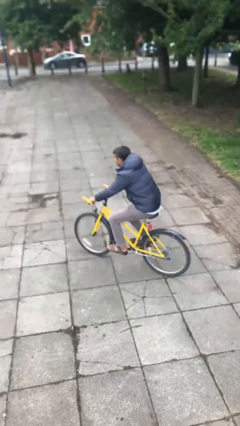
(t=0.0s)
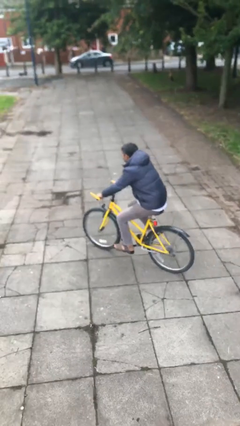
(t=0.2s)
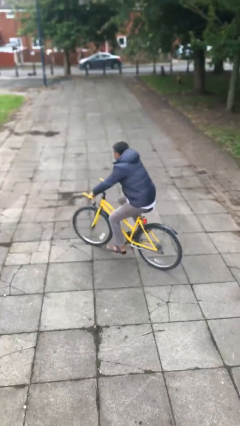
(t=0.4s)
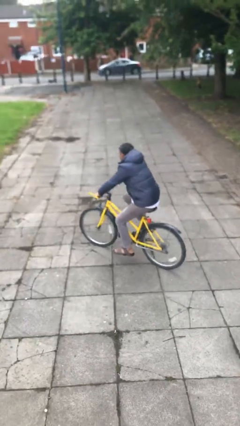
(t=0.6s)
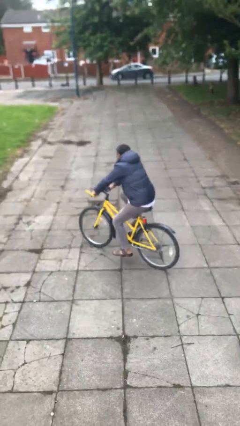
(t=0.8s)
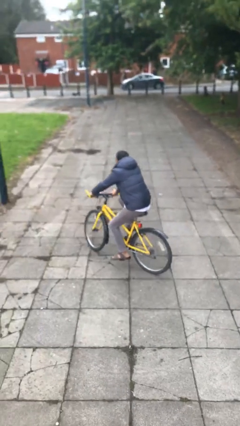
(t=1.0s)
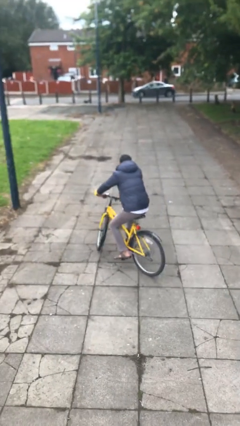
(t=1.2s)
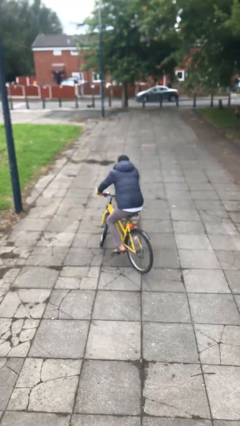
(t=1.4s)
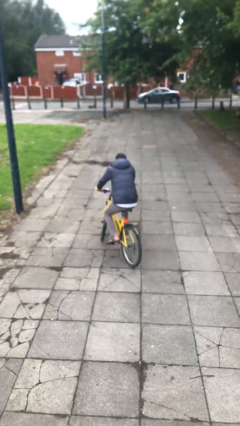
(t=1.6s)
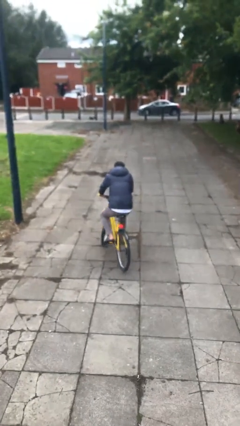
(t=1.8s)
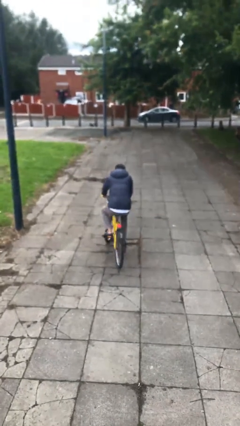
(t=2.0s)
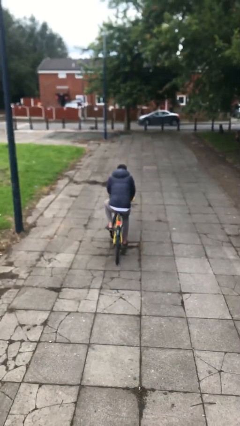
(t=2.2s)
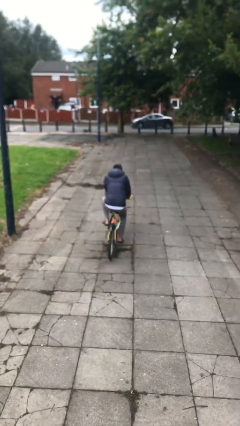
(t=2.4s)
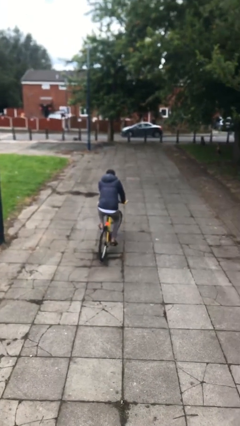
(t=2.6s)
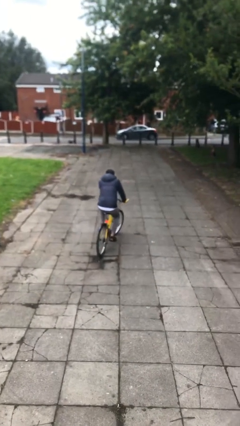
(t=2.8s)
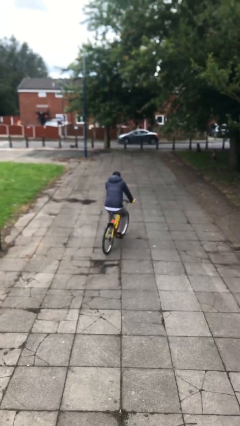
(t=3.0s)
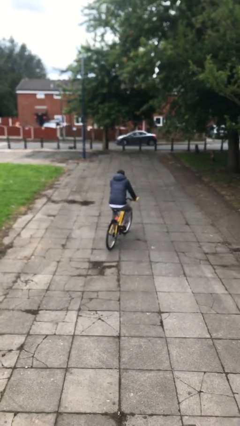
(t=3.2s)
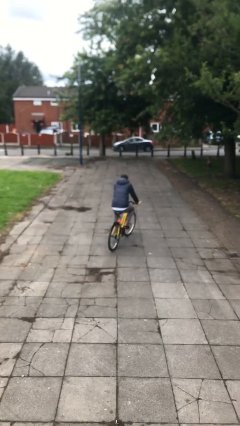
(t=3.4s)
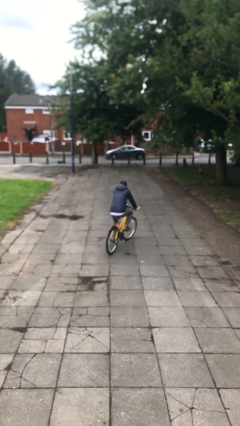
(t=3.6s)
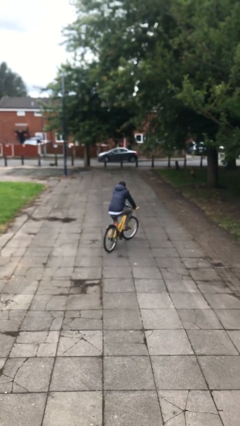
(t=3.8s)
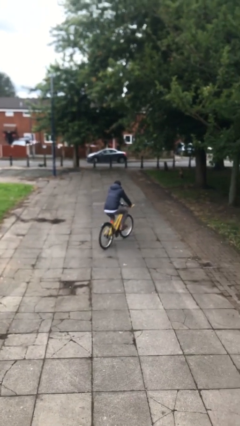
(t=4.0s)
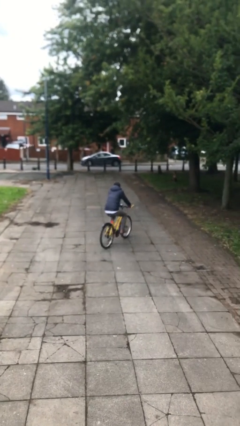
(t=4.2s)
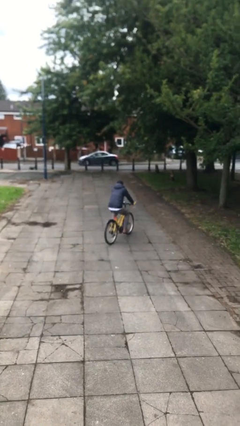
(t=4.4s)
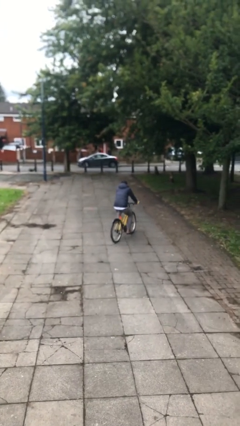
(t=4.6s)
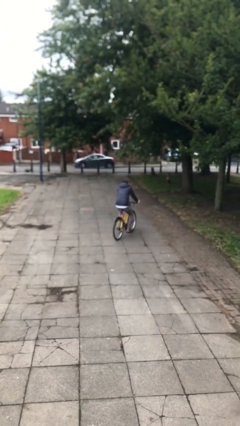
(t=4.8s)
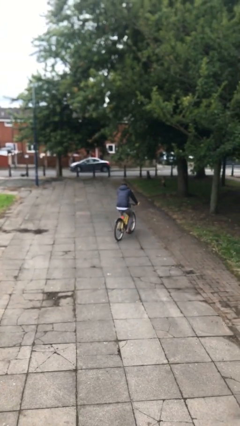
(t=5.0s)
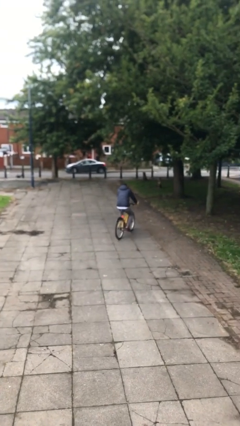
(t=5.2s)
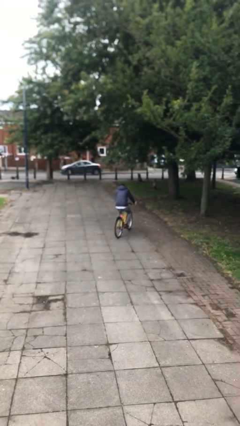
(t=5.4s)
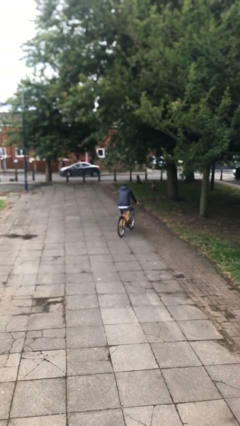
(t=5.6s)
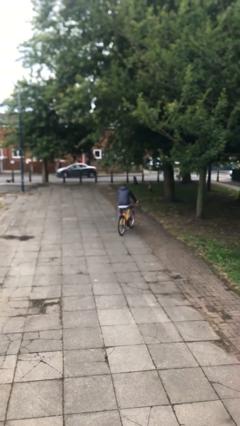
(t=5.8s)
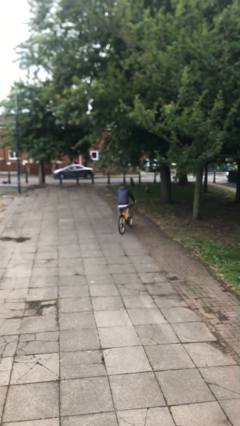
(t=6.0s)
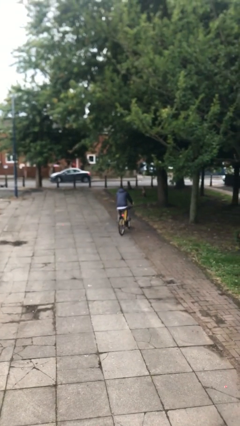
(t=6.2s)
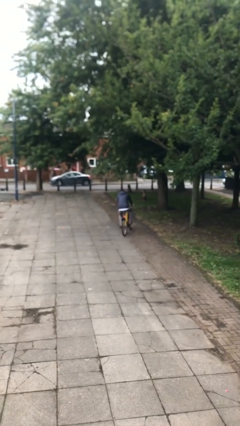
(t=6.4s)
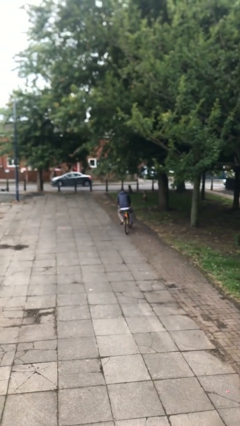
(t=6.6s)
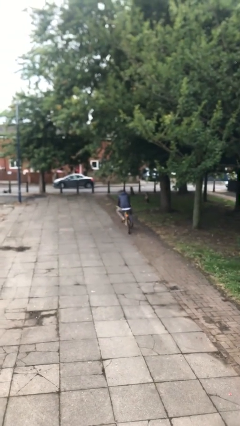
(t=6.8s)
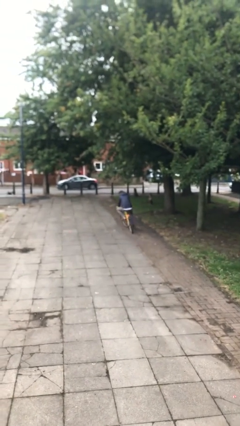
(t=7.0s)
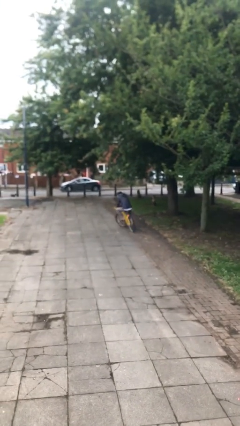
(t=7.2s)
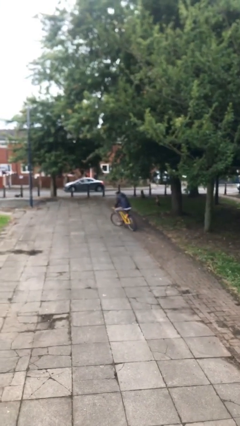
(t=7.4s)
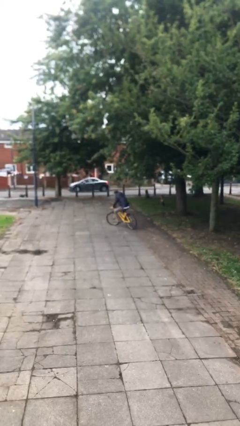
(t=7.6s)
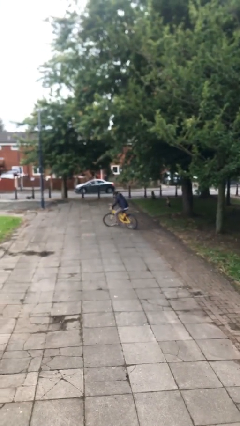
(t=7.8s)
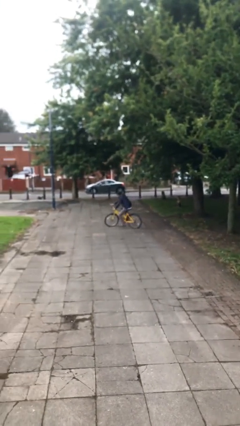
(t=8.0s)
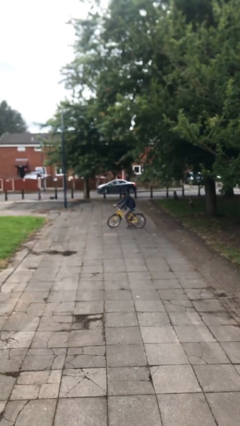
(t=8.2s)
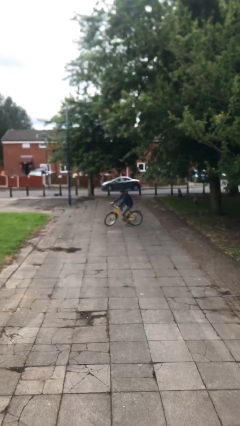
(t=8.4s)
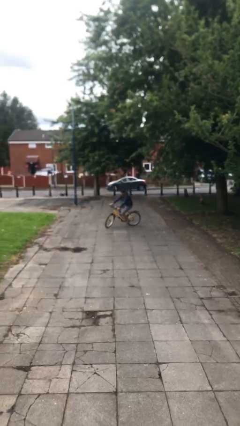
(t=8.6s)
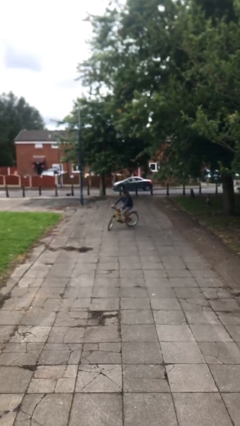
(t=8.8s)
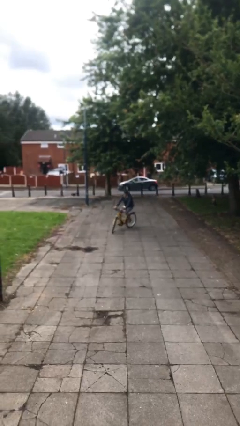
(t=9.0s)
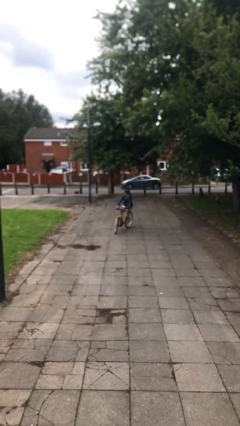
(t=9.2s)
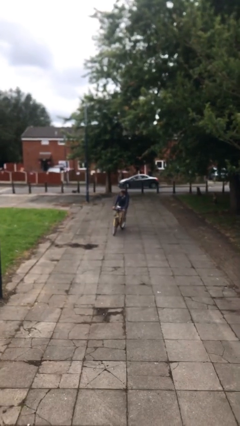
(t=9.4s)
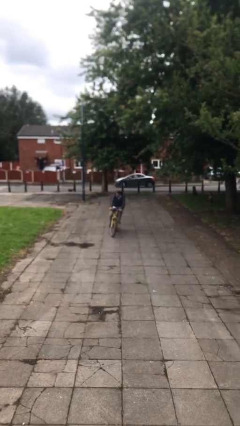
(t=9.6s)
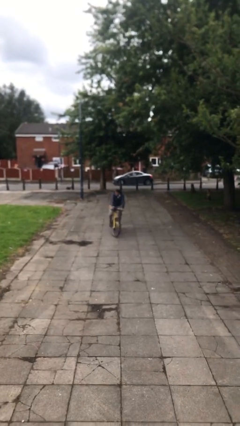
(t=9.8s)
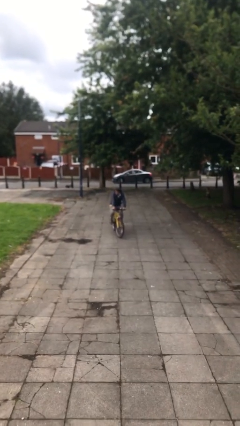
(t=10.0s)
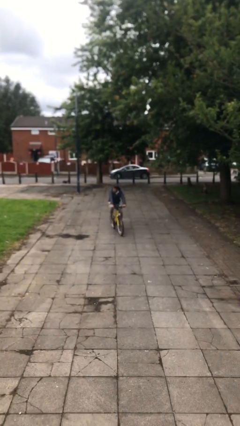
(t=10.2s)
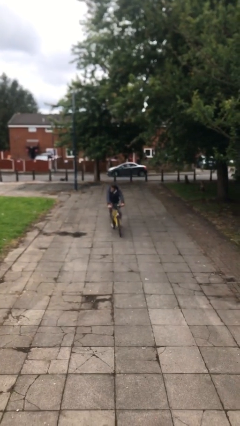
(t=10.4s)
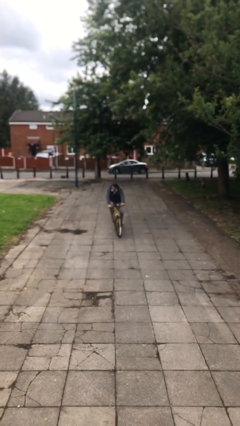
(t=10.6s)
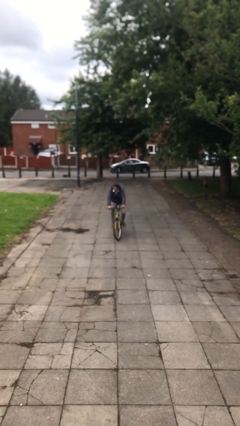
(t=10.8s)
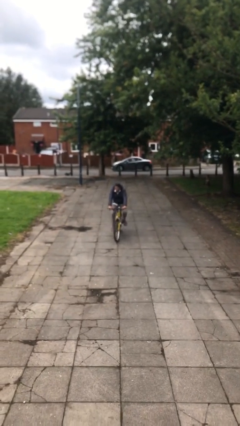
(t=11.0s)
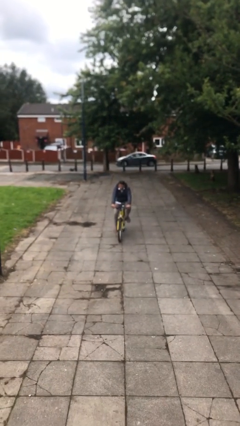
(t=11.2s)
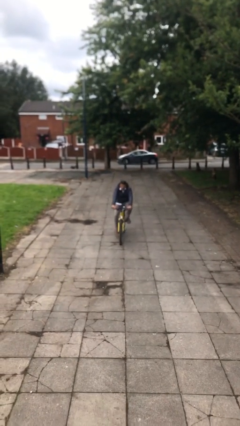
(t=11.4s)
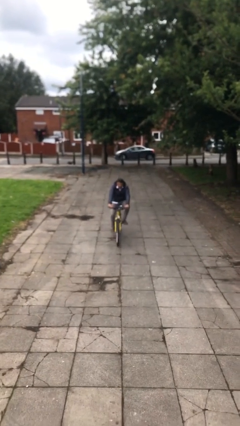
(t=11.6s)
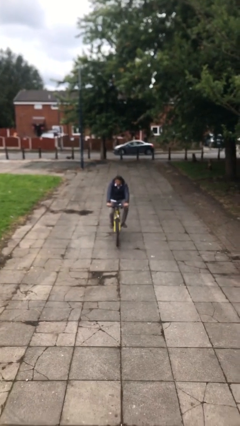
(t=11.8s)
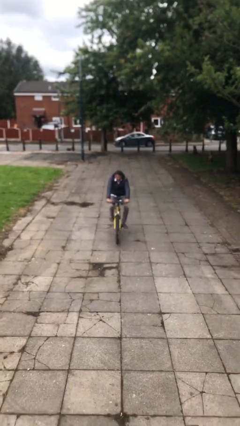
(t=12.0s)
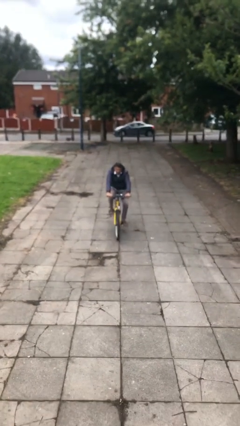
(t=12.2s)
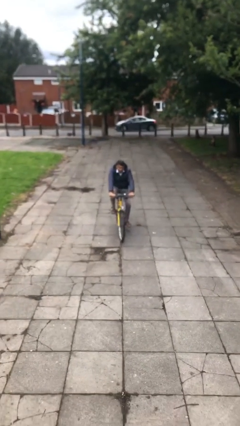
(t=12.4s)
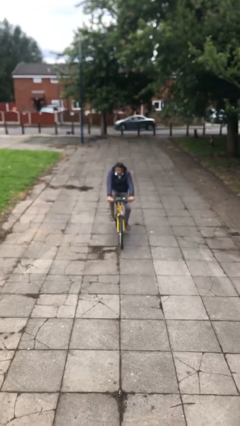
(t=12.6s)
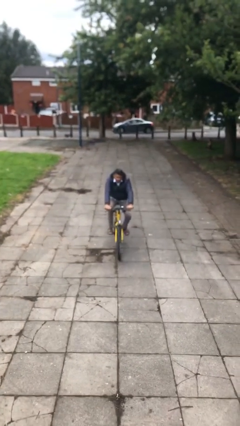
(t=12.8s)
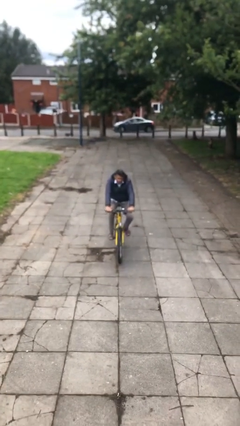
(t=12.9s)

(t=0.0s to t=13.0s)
person rides bicycle

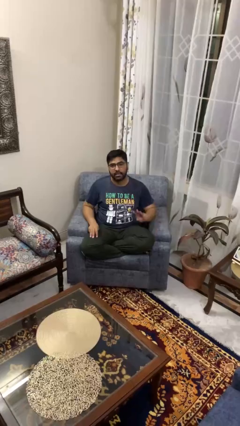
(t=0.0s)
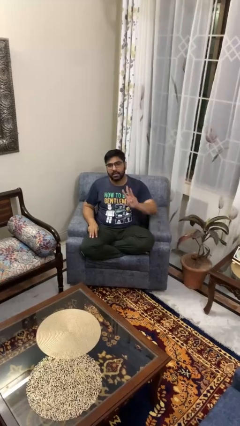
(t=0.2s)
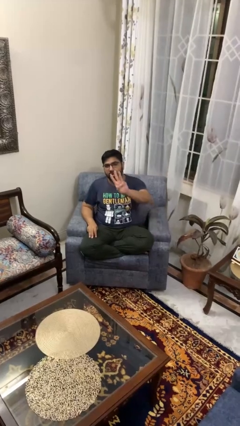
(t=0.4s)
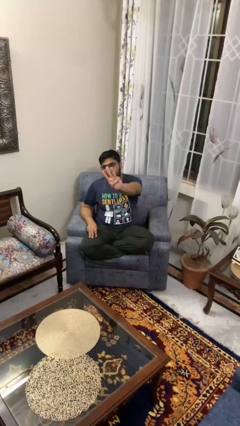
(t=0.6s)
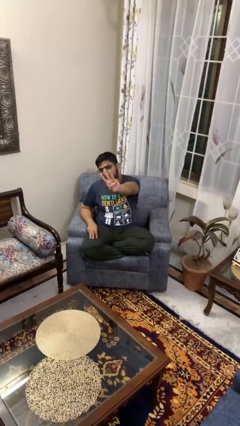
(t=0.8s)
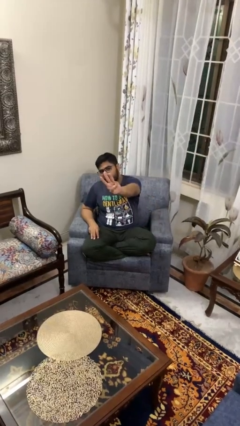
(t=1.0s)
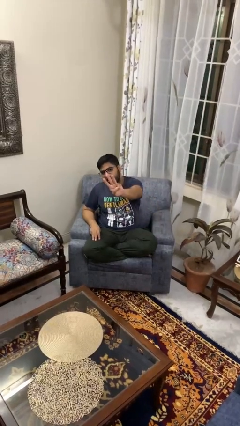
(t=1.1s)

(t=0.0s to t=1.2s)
person gestures number three

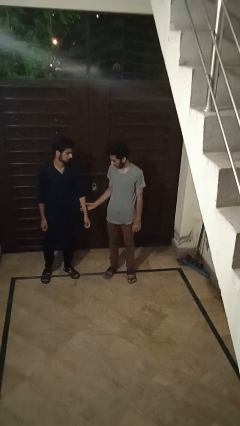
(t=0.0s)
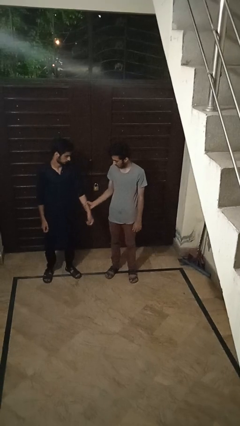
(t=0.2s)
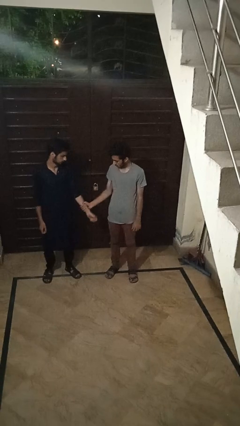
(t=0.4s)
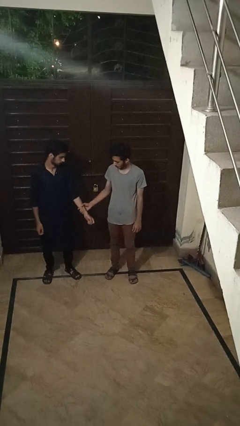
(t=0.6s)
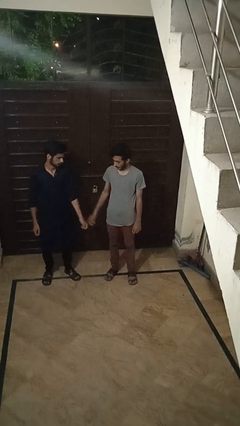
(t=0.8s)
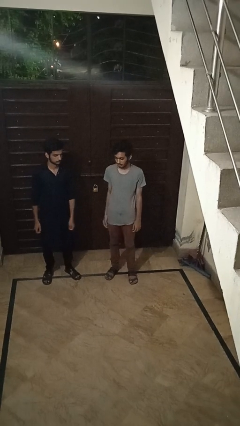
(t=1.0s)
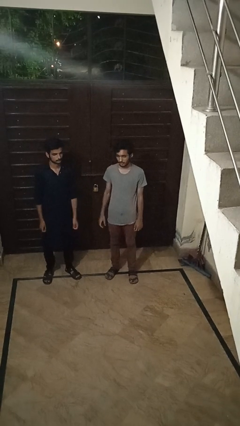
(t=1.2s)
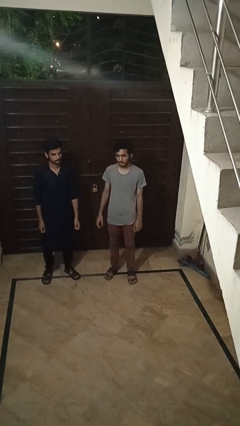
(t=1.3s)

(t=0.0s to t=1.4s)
person grabs person by forearm

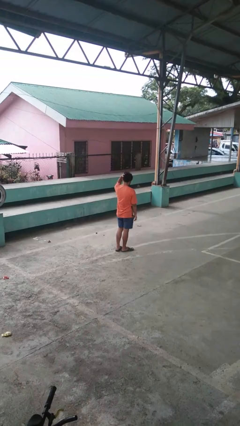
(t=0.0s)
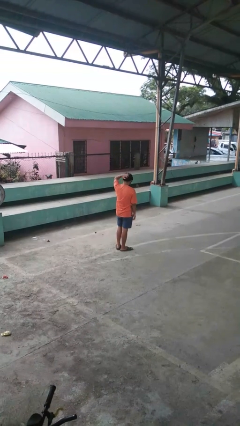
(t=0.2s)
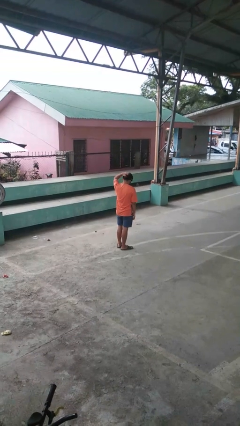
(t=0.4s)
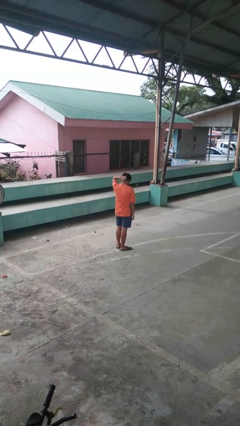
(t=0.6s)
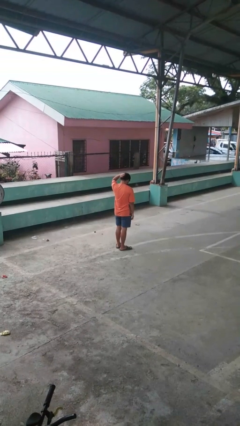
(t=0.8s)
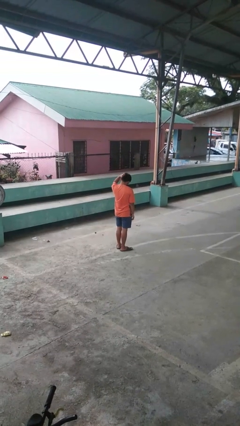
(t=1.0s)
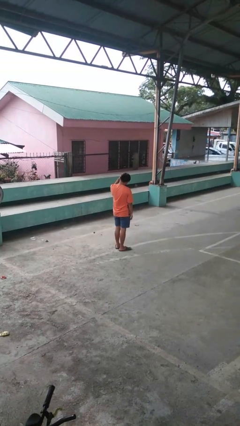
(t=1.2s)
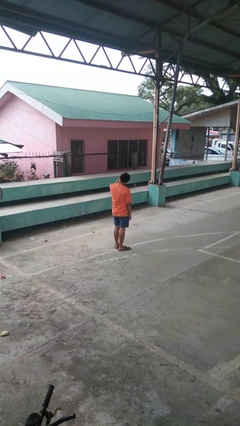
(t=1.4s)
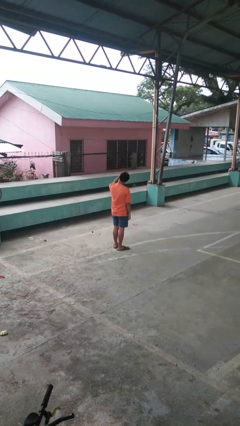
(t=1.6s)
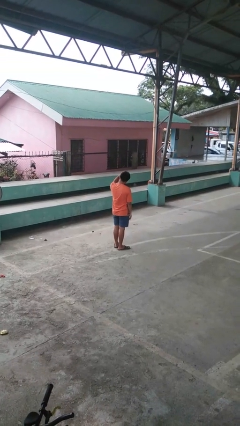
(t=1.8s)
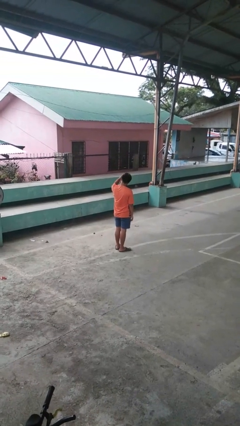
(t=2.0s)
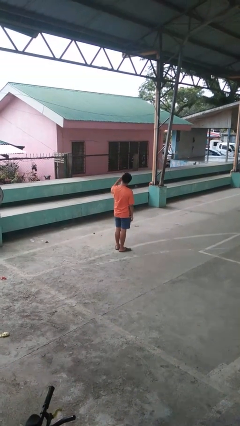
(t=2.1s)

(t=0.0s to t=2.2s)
person scratches face
